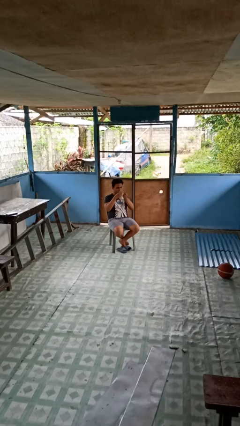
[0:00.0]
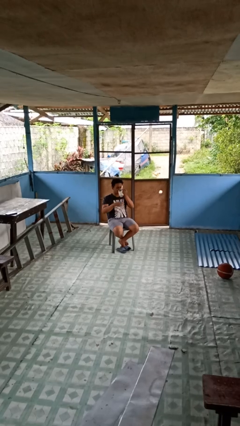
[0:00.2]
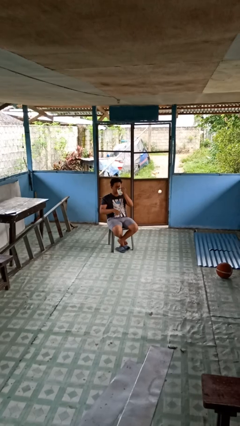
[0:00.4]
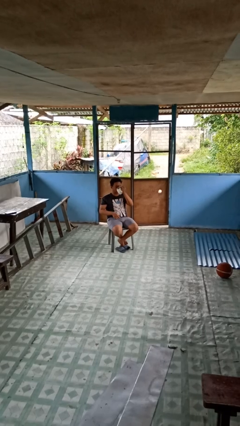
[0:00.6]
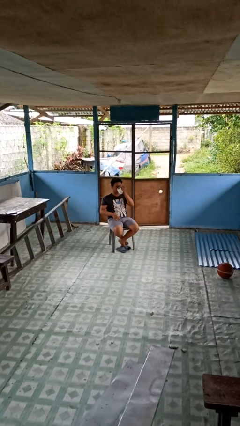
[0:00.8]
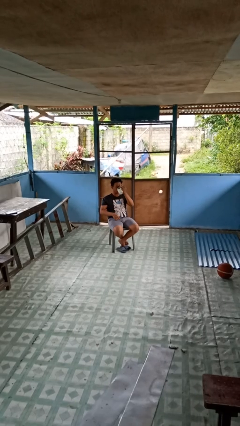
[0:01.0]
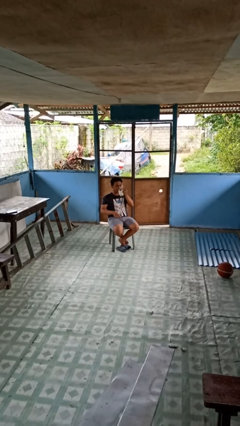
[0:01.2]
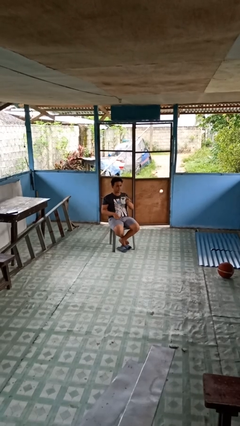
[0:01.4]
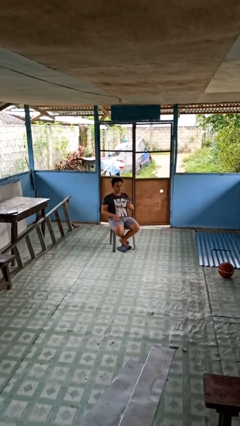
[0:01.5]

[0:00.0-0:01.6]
person drinks from mug

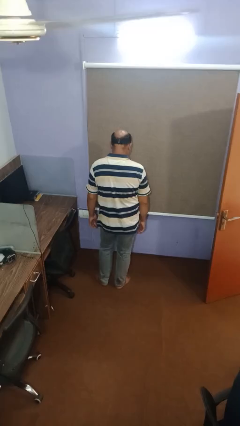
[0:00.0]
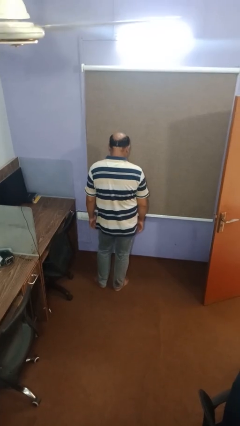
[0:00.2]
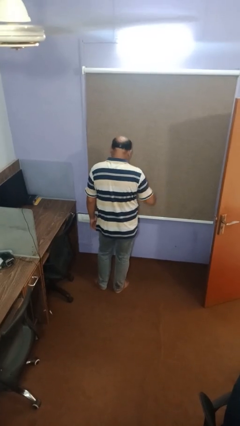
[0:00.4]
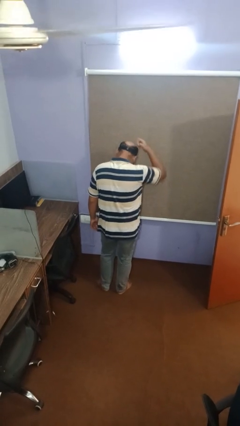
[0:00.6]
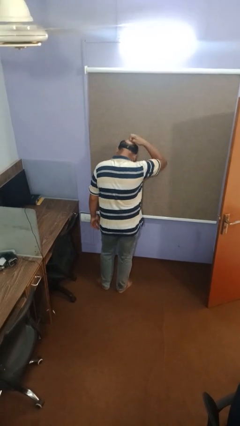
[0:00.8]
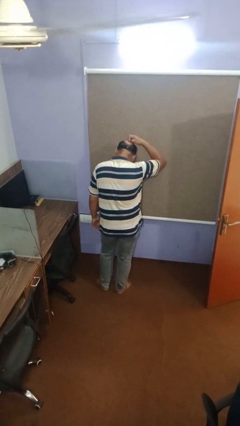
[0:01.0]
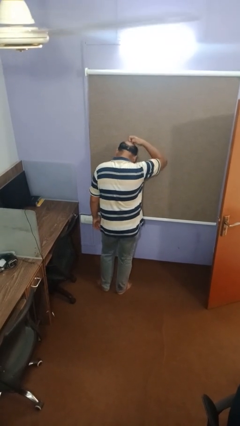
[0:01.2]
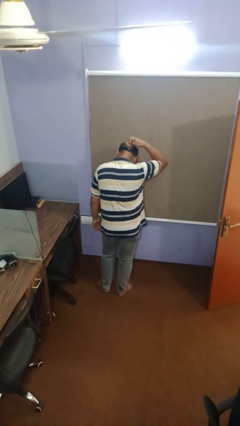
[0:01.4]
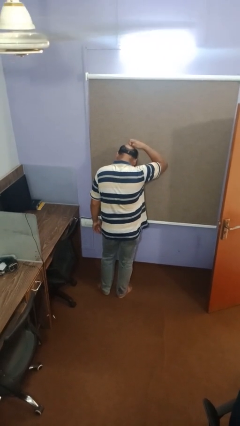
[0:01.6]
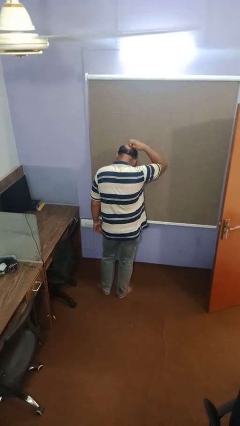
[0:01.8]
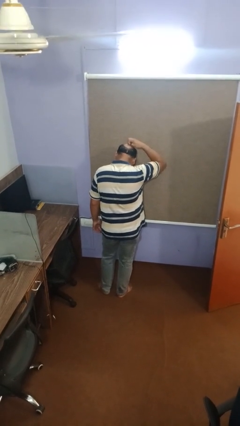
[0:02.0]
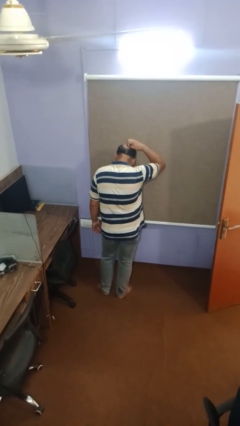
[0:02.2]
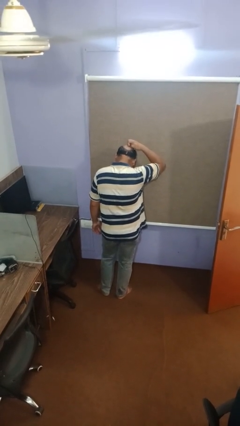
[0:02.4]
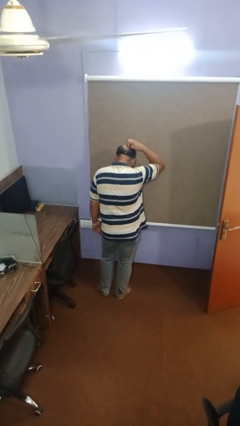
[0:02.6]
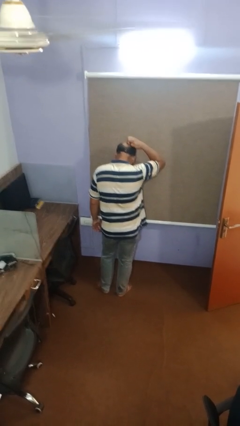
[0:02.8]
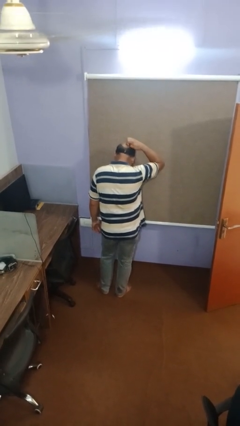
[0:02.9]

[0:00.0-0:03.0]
person scratches face

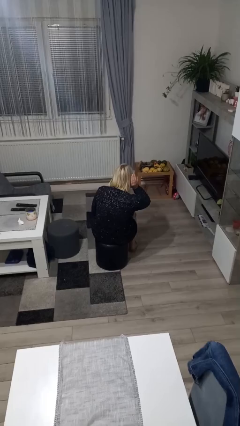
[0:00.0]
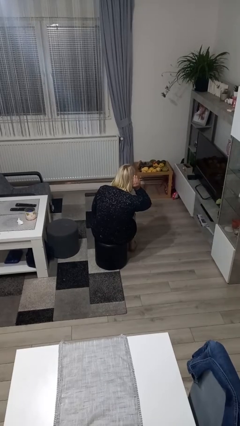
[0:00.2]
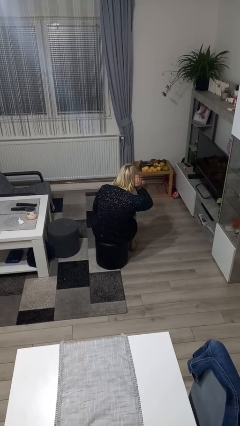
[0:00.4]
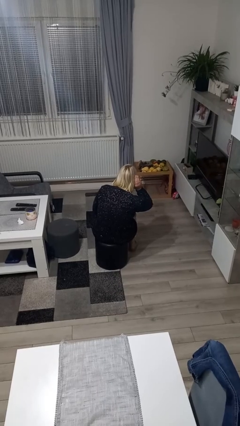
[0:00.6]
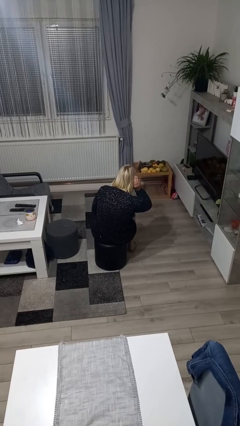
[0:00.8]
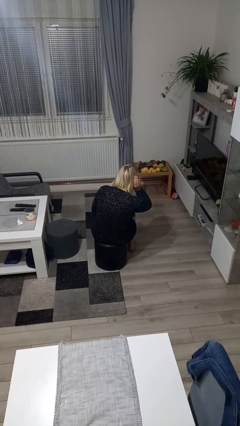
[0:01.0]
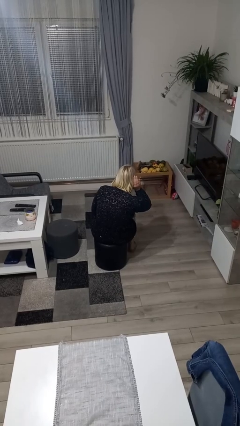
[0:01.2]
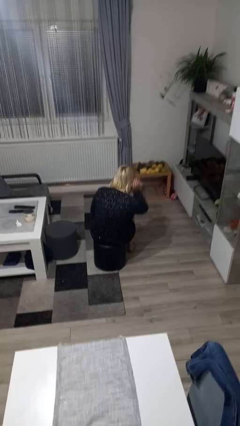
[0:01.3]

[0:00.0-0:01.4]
person gestures listen closely

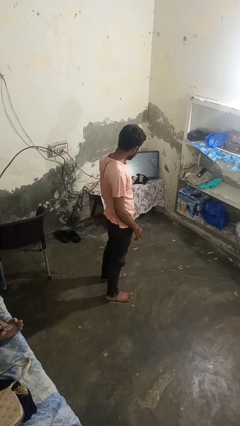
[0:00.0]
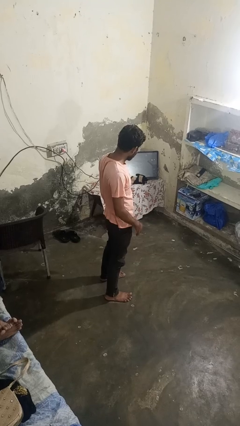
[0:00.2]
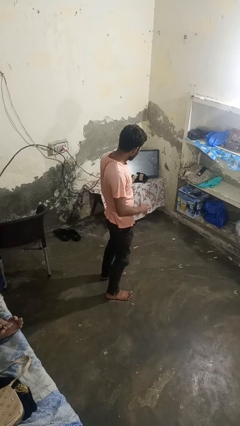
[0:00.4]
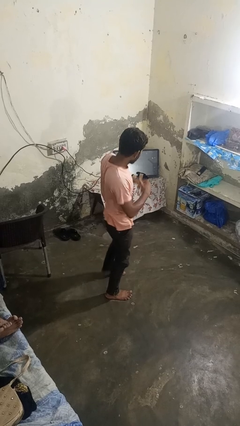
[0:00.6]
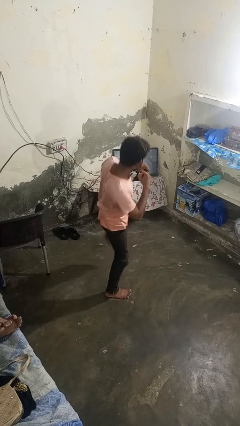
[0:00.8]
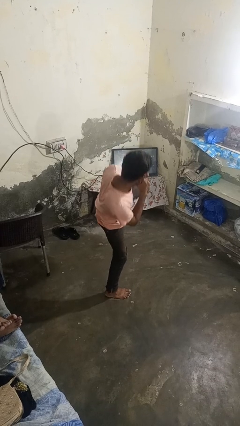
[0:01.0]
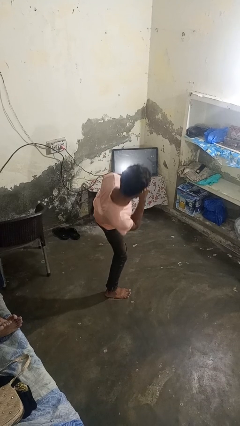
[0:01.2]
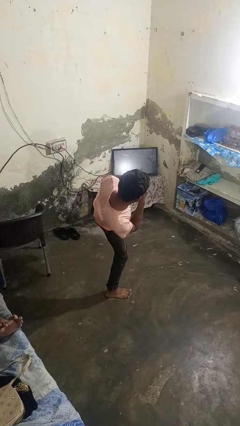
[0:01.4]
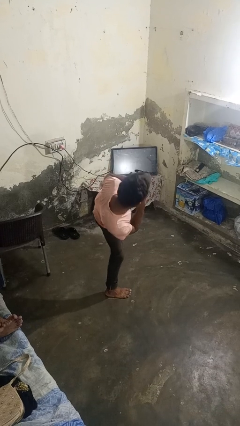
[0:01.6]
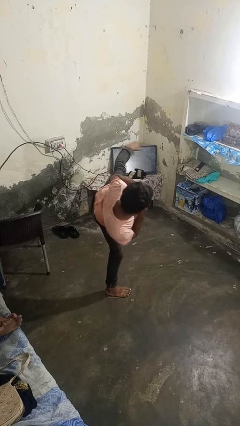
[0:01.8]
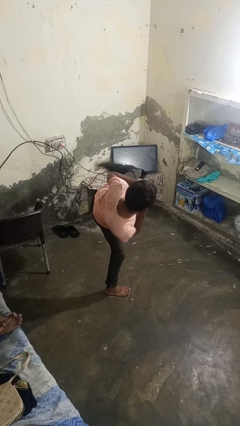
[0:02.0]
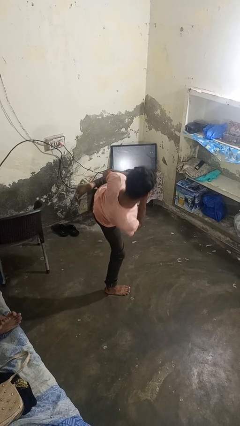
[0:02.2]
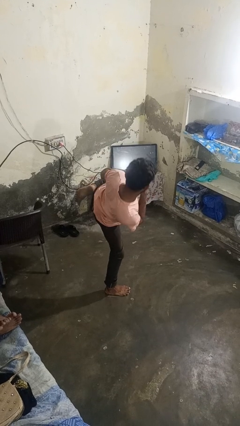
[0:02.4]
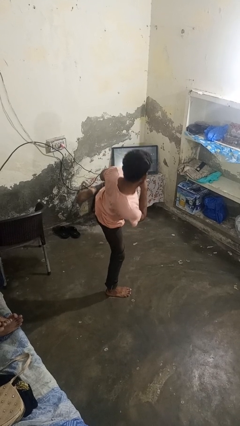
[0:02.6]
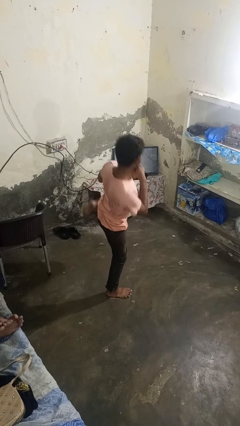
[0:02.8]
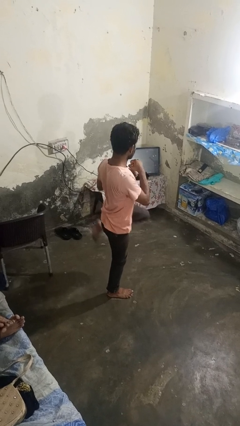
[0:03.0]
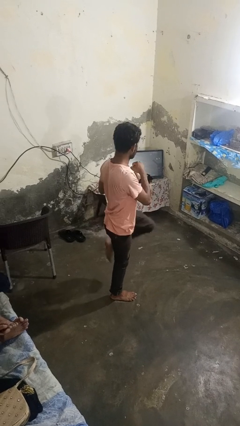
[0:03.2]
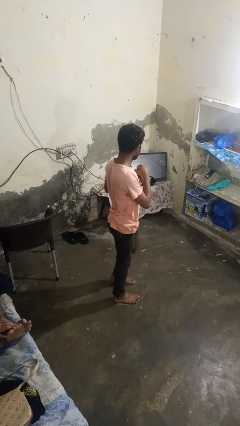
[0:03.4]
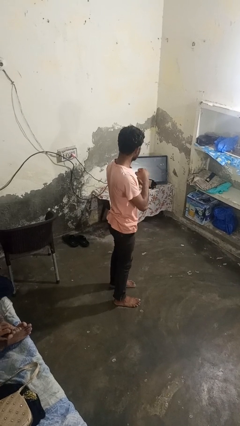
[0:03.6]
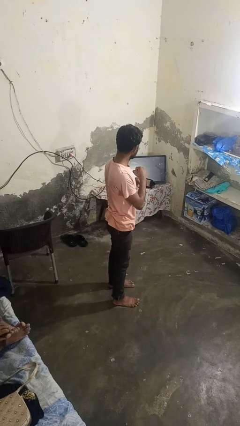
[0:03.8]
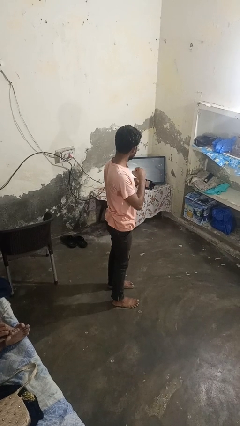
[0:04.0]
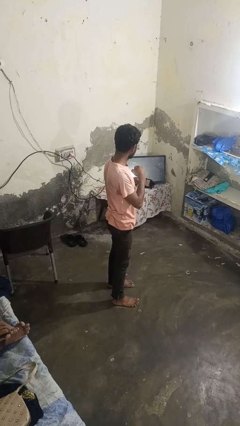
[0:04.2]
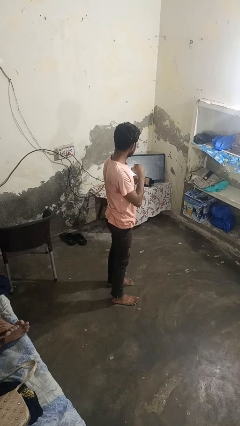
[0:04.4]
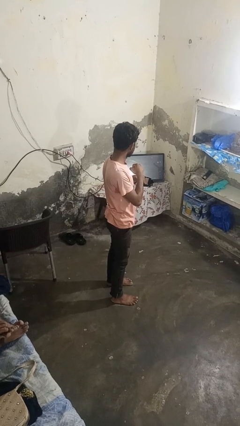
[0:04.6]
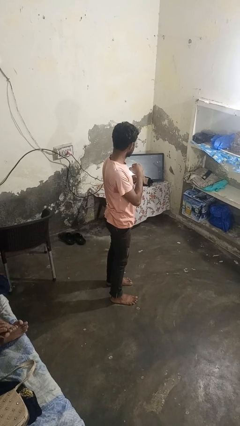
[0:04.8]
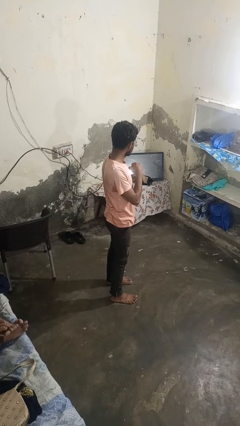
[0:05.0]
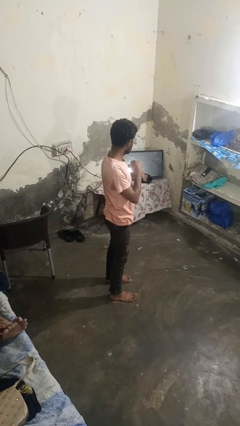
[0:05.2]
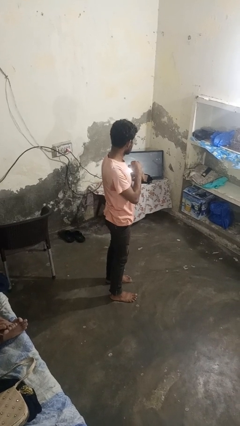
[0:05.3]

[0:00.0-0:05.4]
person karate kicks

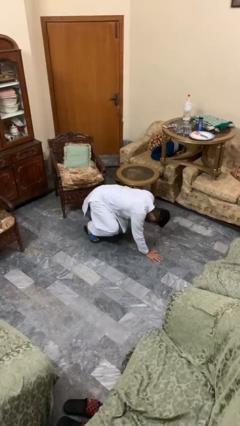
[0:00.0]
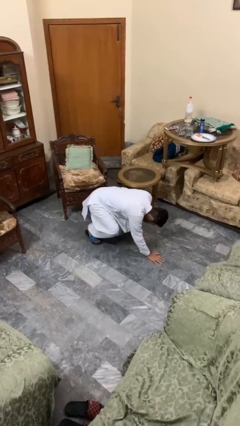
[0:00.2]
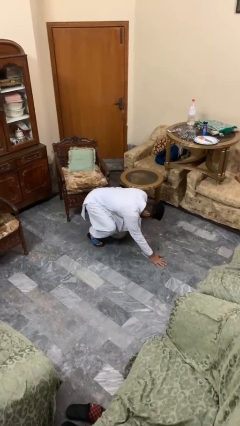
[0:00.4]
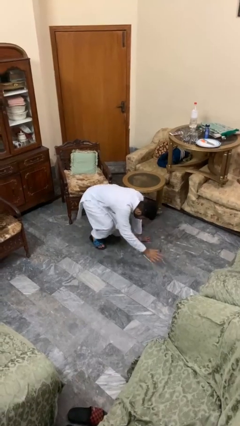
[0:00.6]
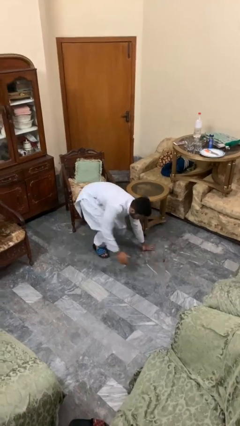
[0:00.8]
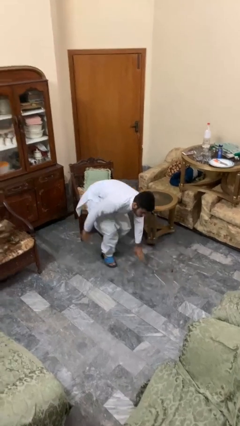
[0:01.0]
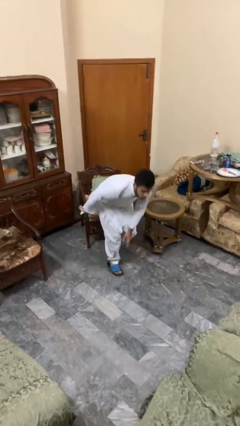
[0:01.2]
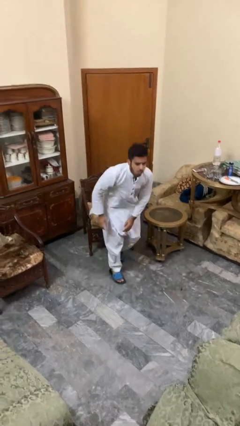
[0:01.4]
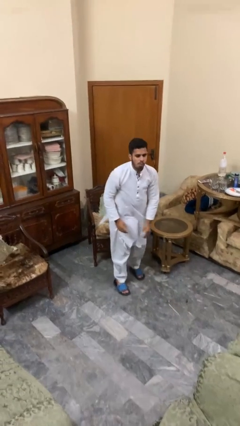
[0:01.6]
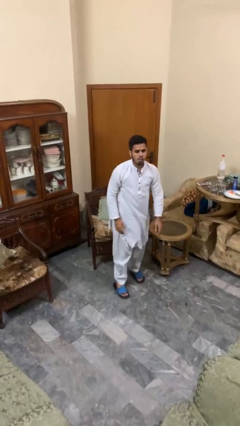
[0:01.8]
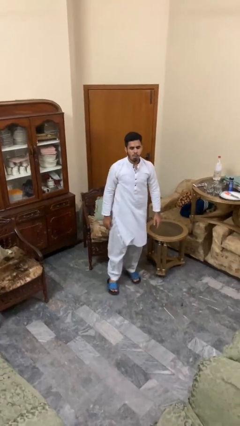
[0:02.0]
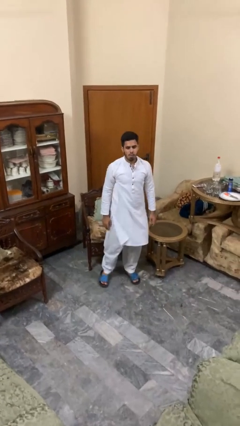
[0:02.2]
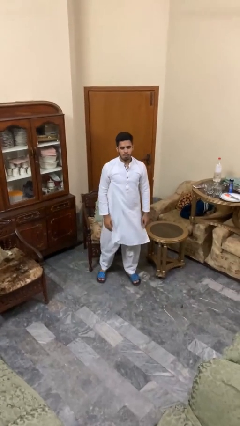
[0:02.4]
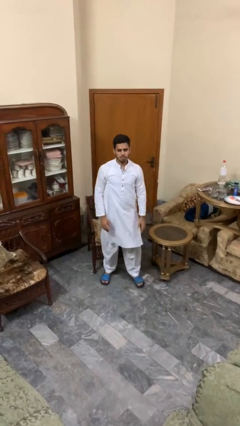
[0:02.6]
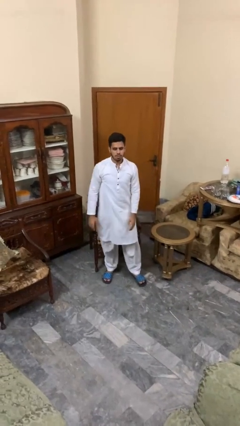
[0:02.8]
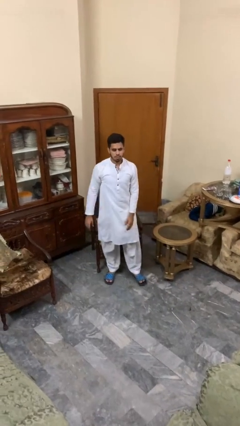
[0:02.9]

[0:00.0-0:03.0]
person stands up from floor

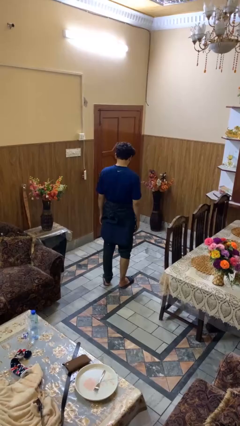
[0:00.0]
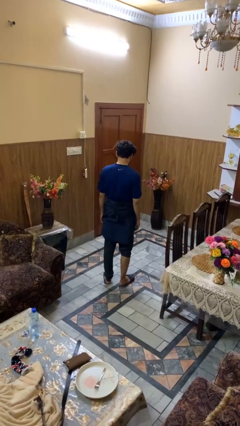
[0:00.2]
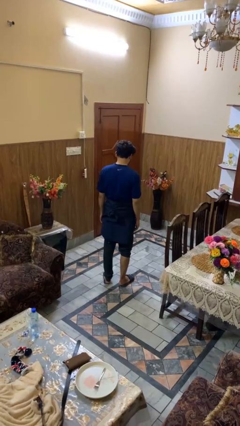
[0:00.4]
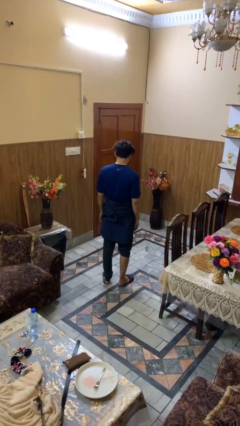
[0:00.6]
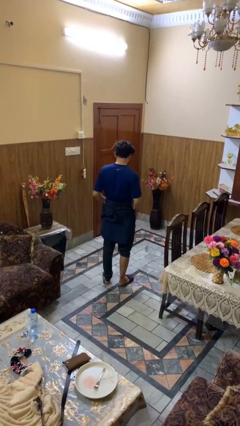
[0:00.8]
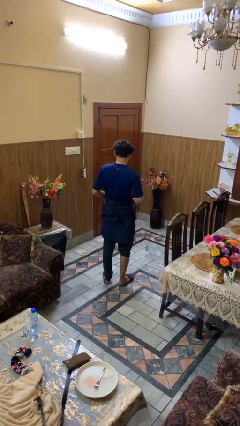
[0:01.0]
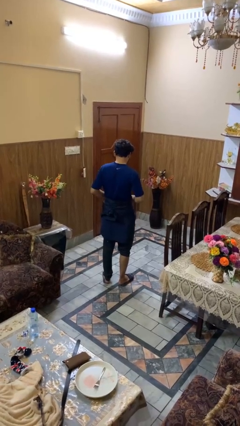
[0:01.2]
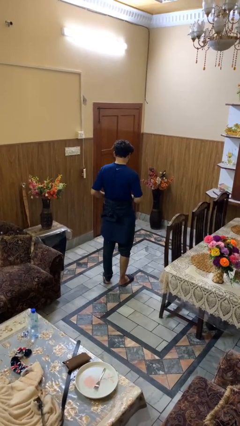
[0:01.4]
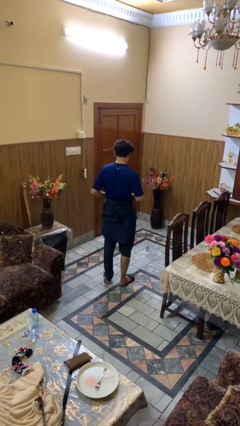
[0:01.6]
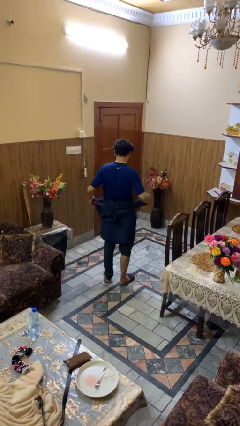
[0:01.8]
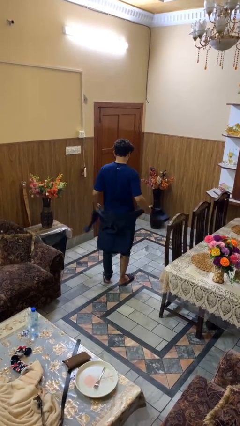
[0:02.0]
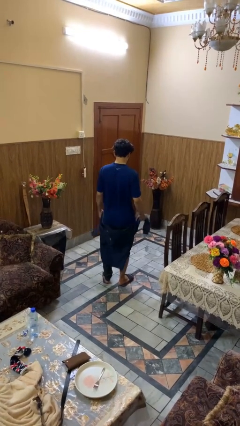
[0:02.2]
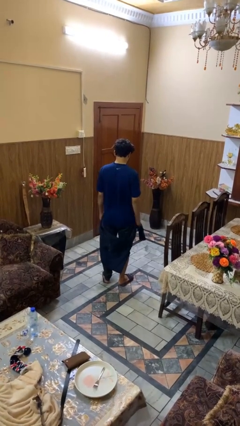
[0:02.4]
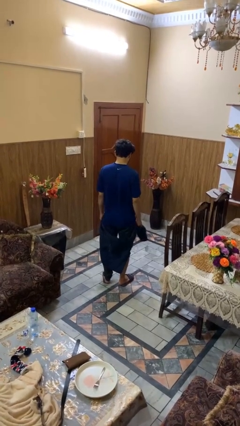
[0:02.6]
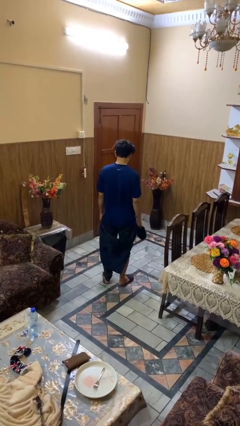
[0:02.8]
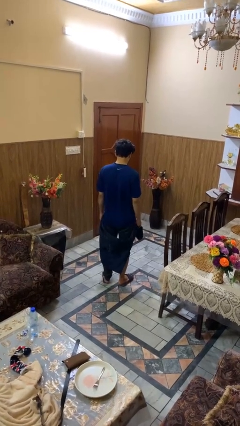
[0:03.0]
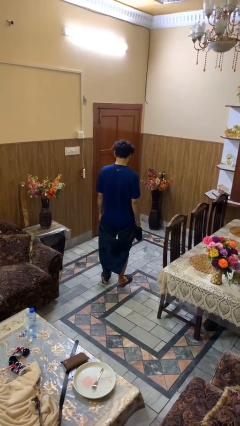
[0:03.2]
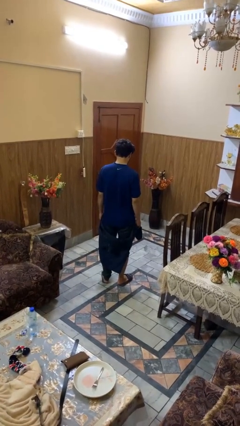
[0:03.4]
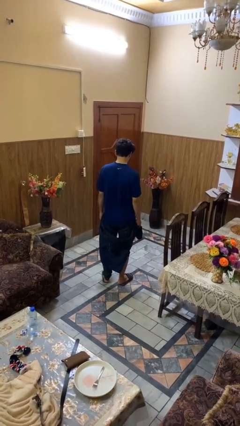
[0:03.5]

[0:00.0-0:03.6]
person unties jacket around waist
